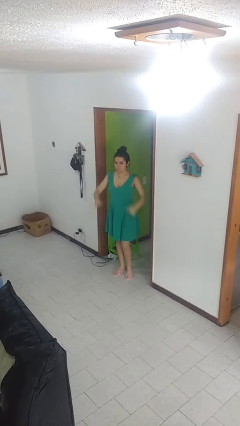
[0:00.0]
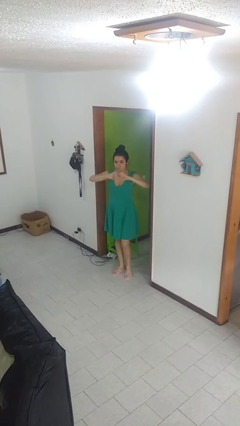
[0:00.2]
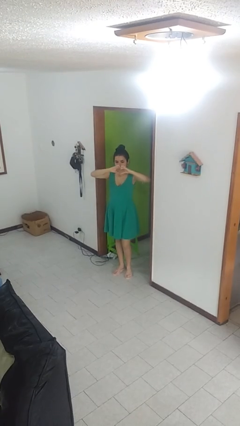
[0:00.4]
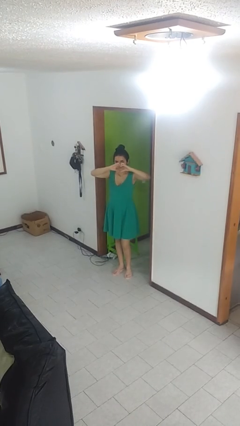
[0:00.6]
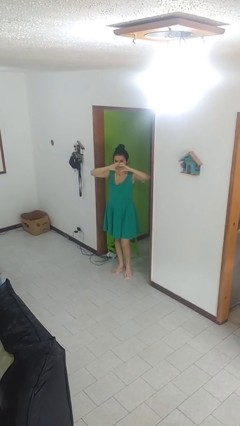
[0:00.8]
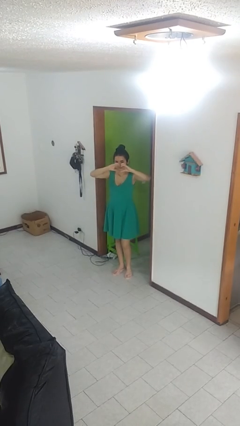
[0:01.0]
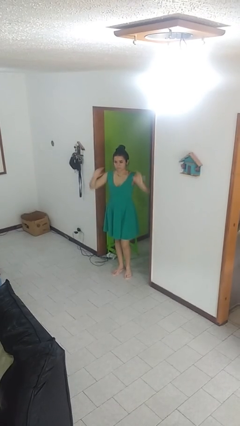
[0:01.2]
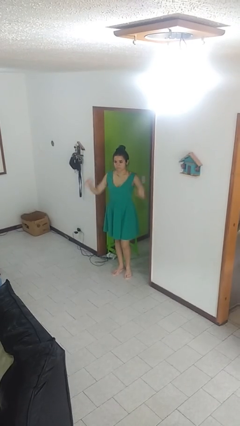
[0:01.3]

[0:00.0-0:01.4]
person gestures heart

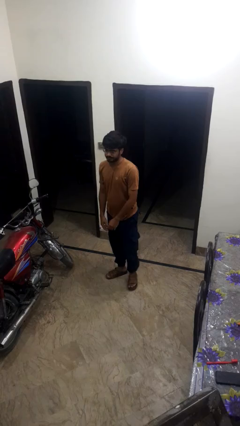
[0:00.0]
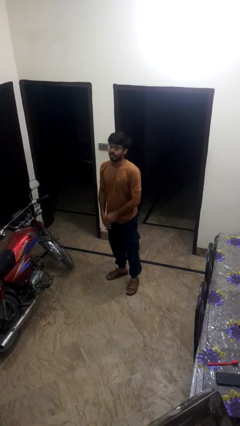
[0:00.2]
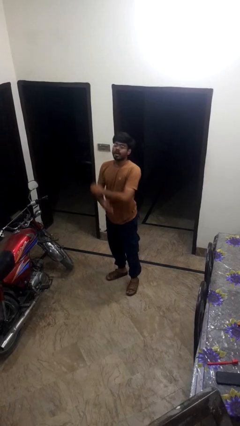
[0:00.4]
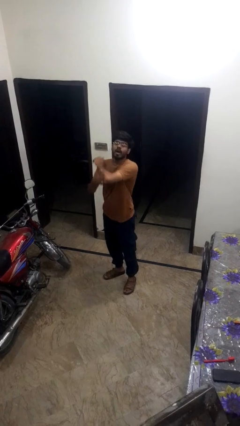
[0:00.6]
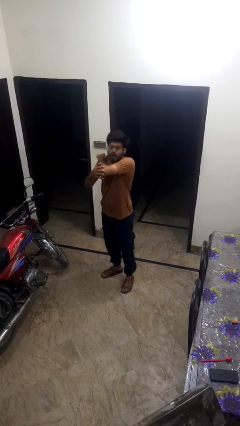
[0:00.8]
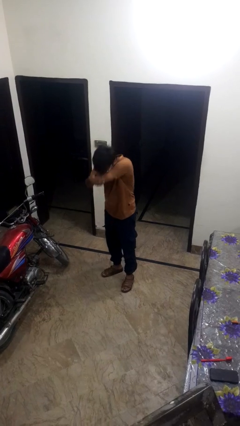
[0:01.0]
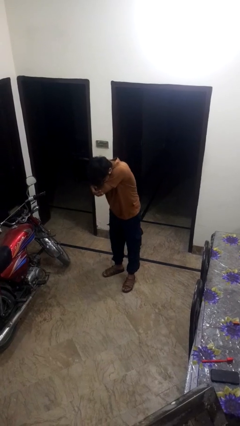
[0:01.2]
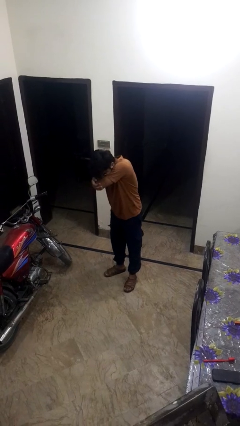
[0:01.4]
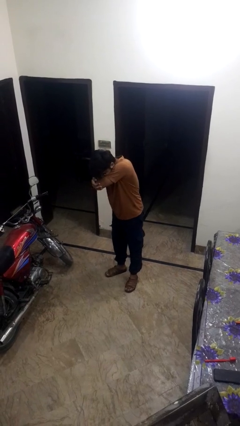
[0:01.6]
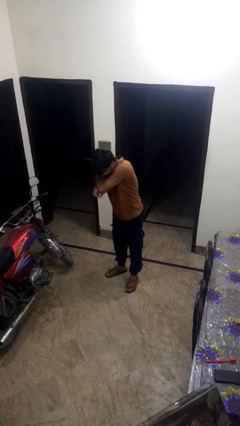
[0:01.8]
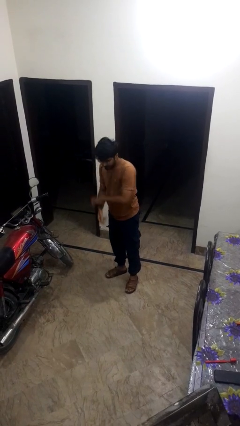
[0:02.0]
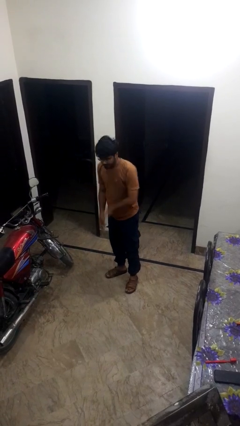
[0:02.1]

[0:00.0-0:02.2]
person sneezes into arm

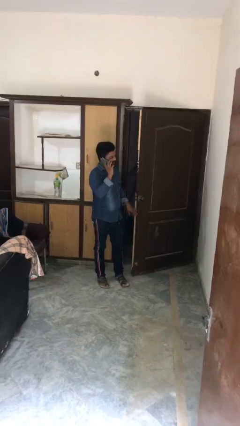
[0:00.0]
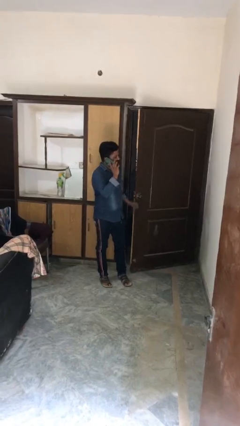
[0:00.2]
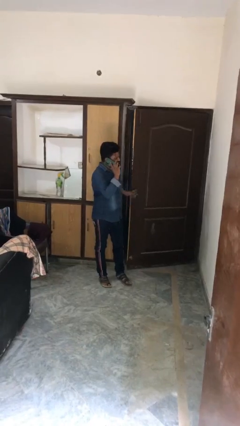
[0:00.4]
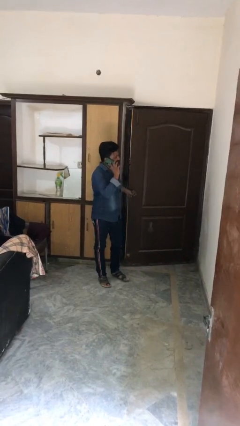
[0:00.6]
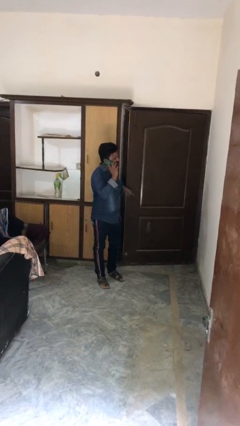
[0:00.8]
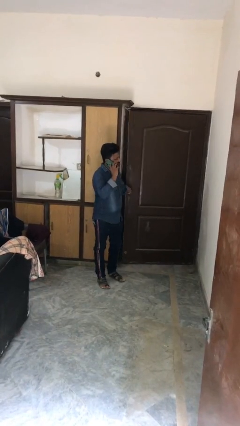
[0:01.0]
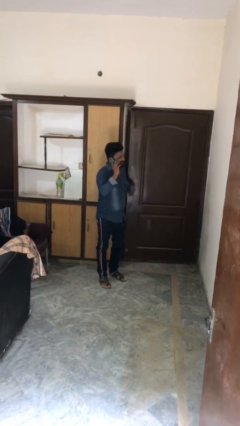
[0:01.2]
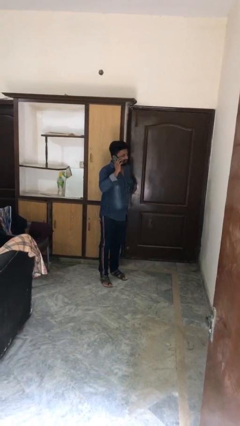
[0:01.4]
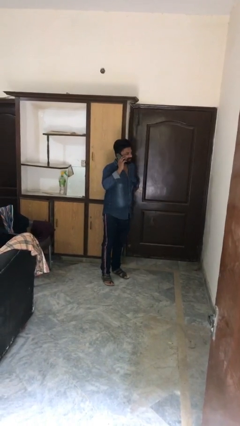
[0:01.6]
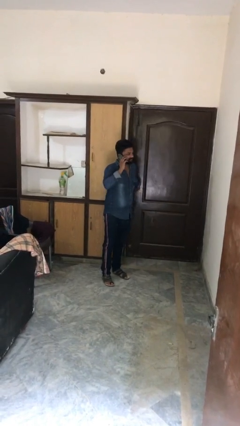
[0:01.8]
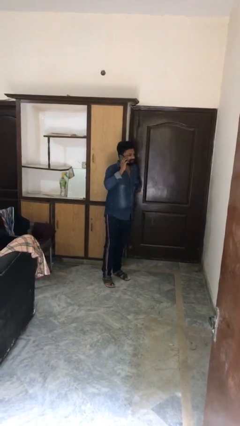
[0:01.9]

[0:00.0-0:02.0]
person closes facility door

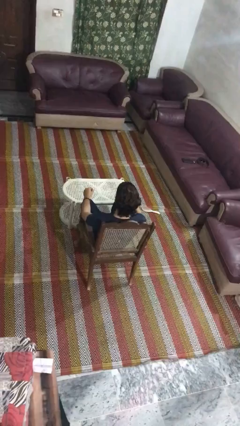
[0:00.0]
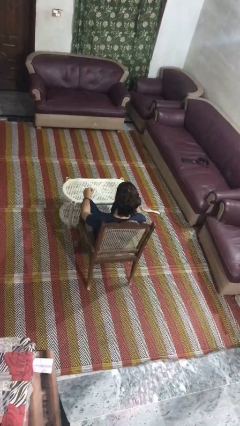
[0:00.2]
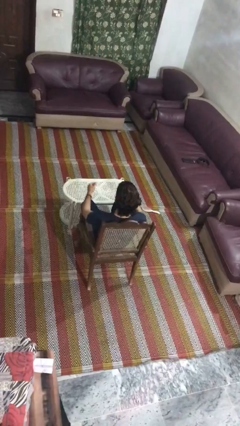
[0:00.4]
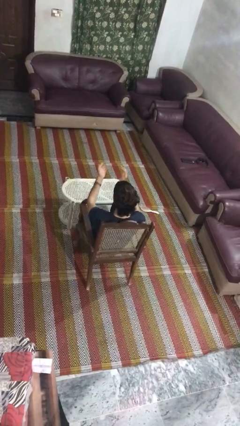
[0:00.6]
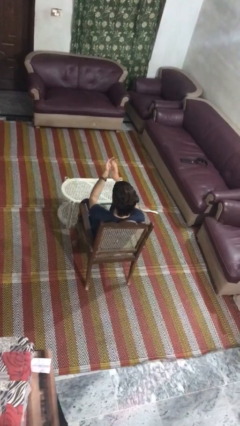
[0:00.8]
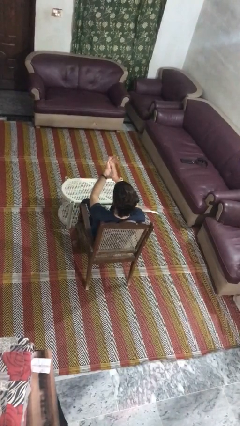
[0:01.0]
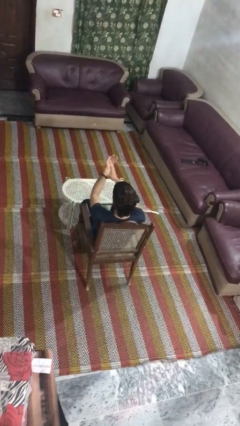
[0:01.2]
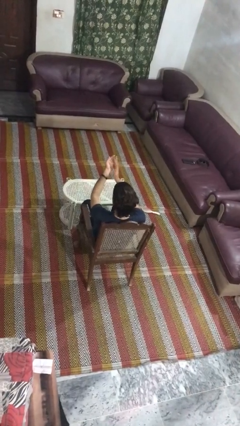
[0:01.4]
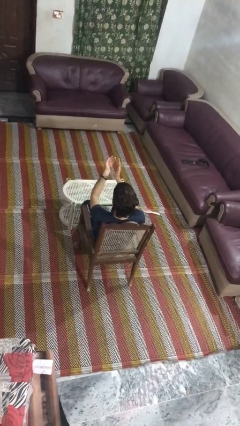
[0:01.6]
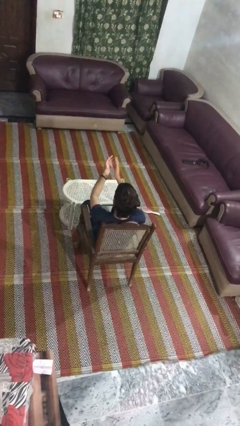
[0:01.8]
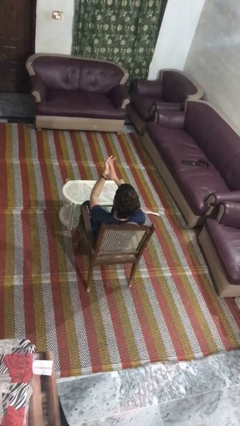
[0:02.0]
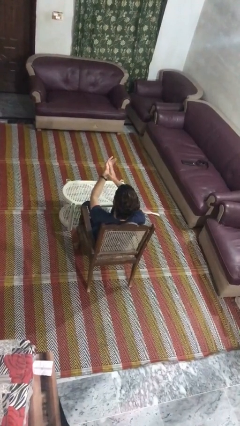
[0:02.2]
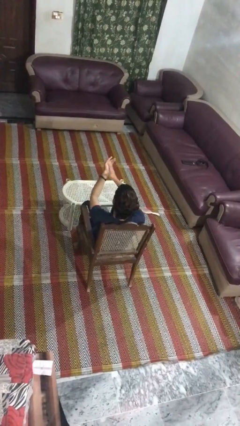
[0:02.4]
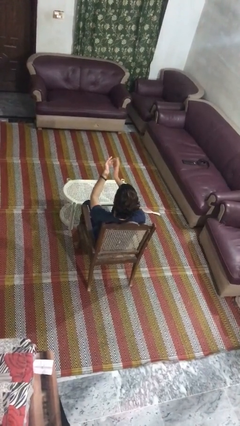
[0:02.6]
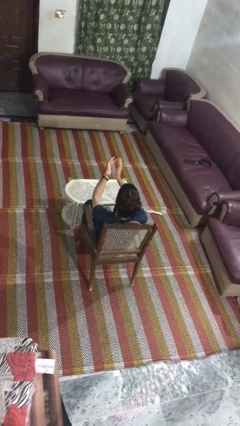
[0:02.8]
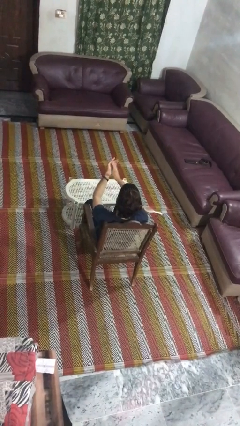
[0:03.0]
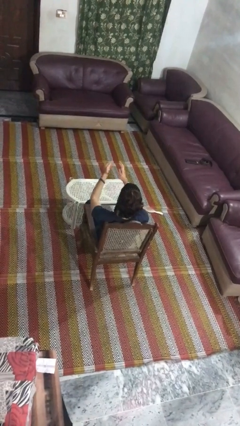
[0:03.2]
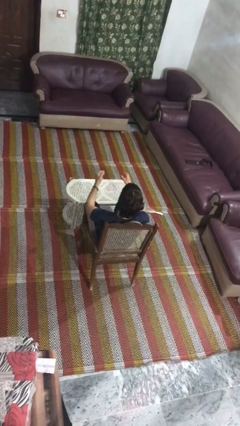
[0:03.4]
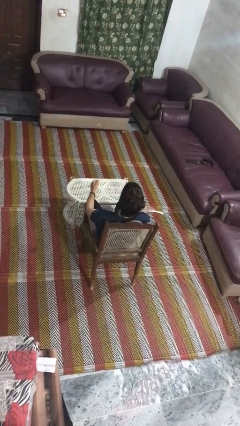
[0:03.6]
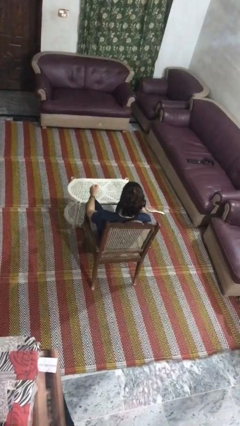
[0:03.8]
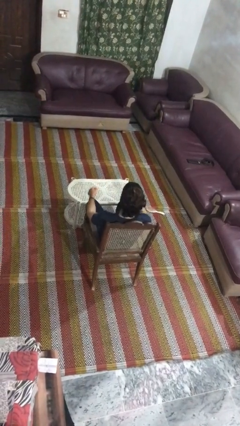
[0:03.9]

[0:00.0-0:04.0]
person claps hands

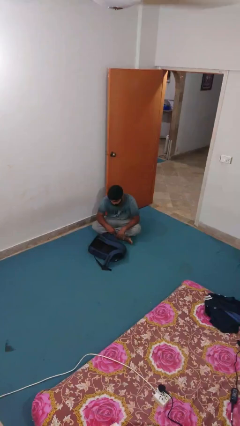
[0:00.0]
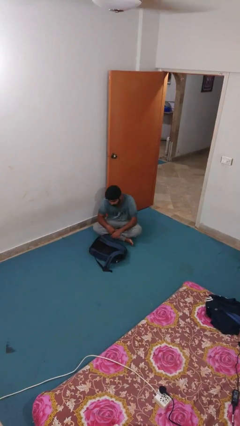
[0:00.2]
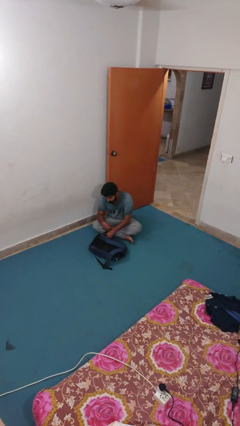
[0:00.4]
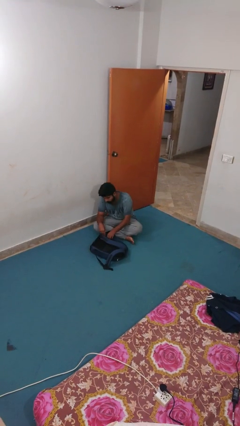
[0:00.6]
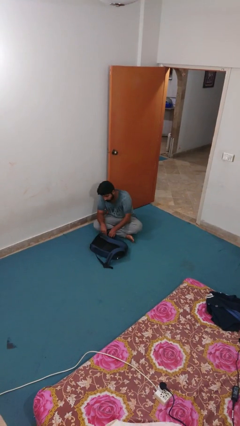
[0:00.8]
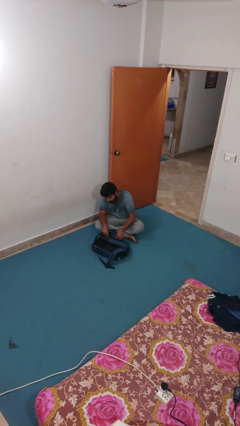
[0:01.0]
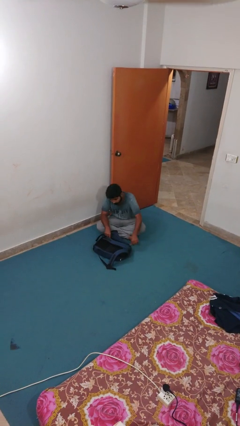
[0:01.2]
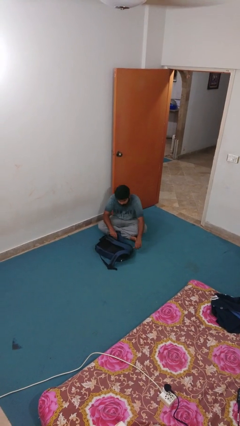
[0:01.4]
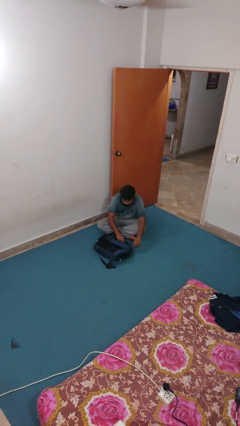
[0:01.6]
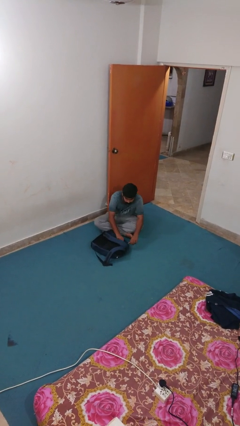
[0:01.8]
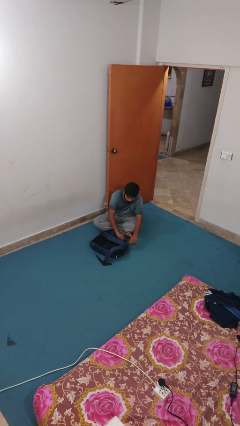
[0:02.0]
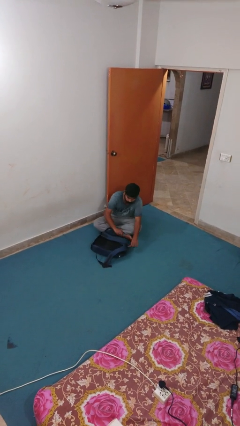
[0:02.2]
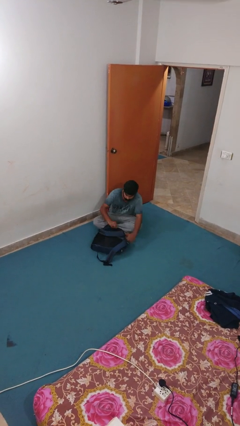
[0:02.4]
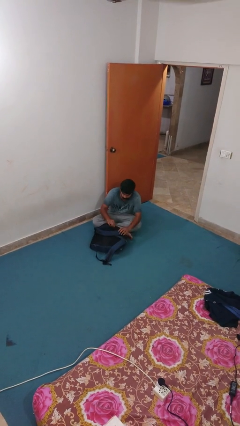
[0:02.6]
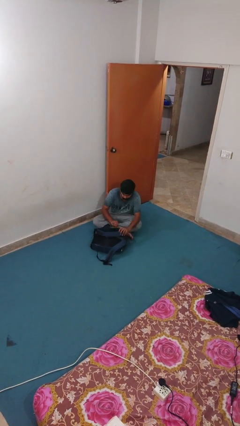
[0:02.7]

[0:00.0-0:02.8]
person searches in backpack

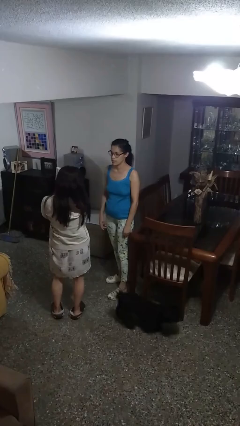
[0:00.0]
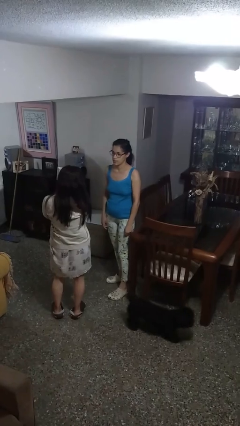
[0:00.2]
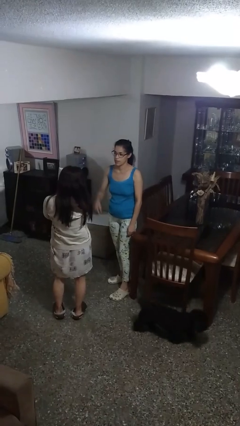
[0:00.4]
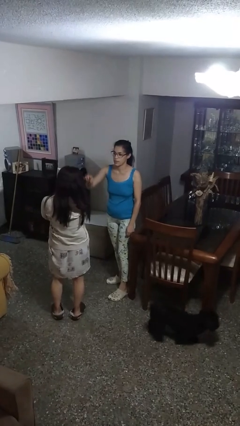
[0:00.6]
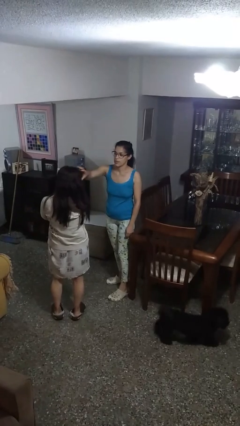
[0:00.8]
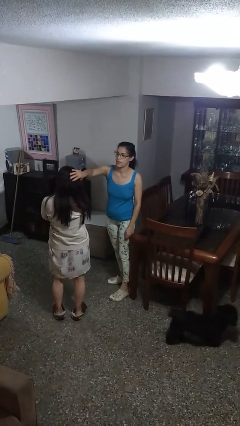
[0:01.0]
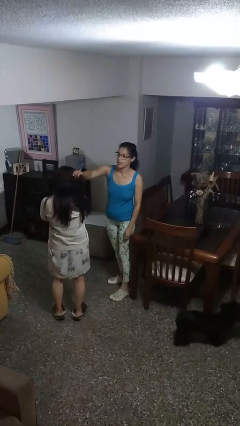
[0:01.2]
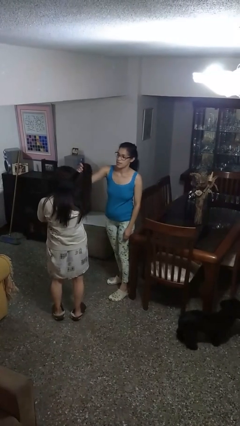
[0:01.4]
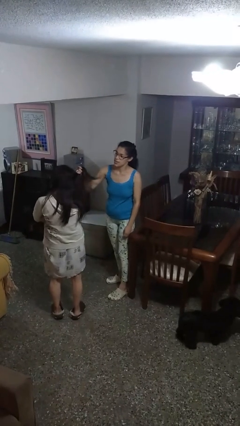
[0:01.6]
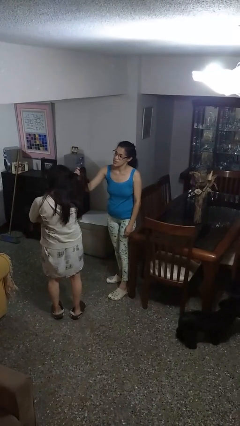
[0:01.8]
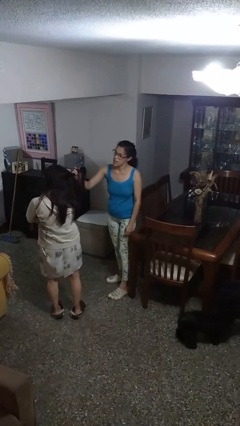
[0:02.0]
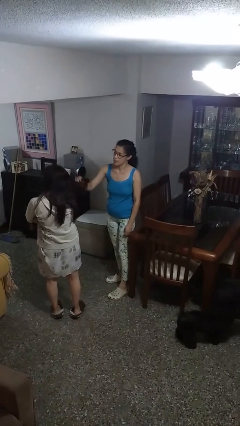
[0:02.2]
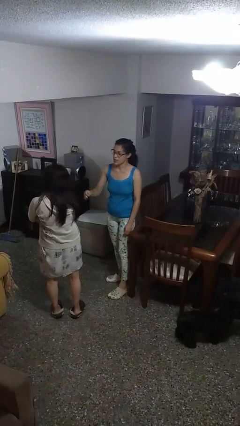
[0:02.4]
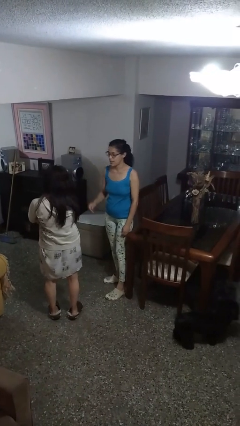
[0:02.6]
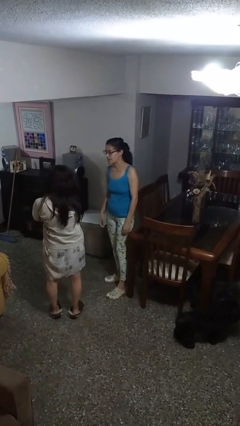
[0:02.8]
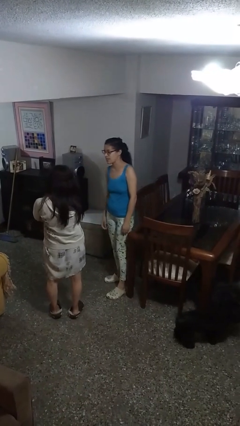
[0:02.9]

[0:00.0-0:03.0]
person grabs person by hair

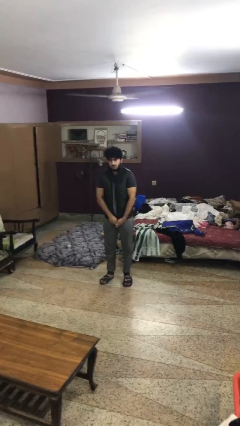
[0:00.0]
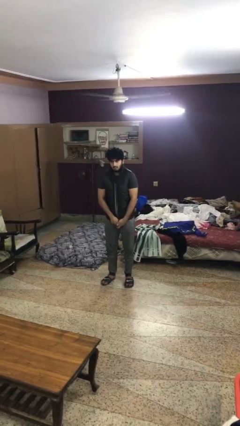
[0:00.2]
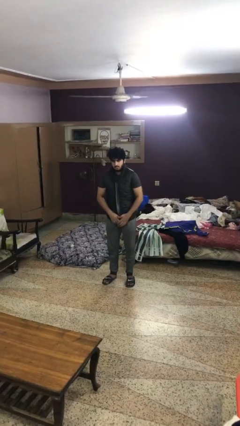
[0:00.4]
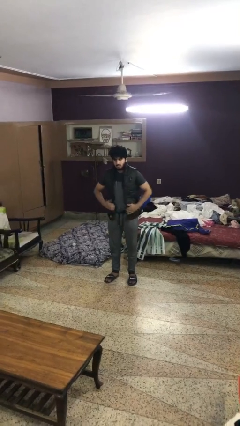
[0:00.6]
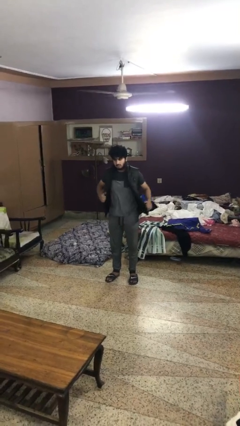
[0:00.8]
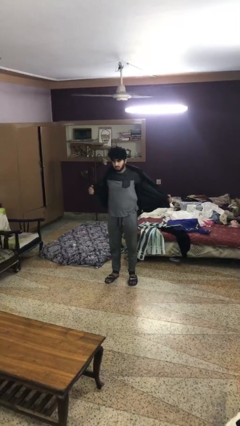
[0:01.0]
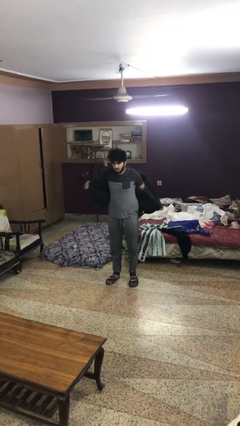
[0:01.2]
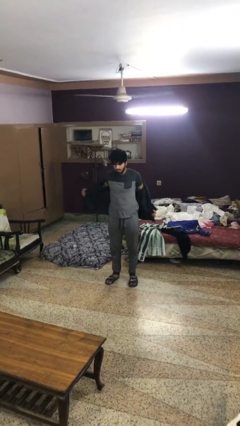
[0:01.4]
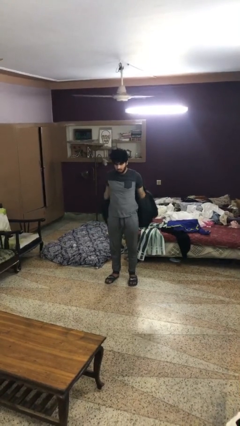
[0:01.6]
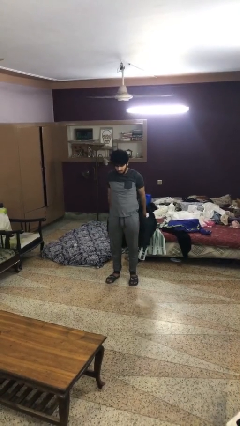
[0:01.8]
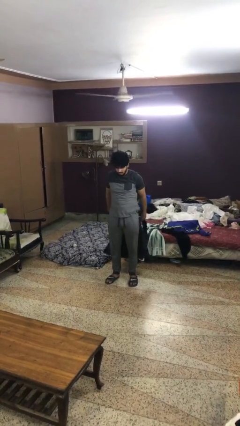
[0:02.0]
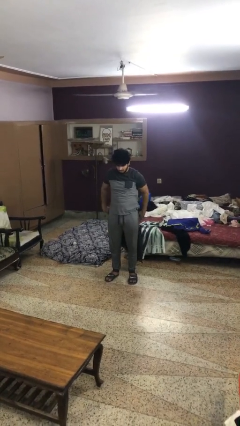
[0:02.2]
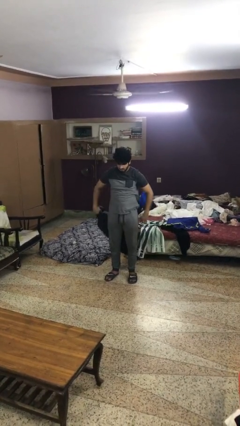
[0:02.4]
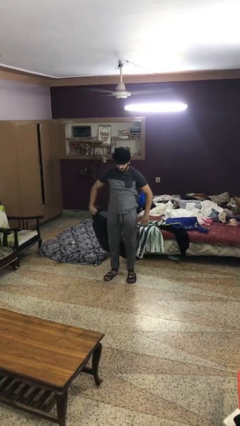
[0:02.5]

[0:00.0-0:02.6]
person takes off jacket
